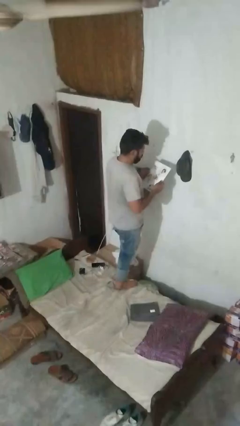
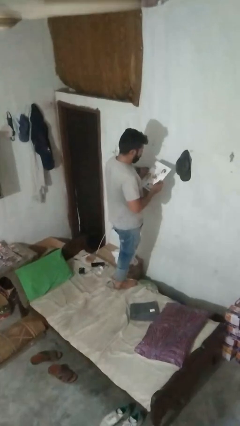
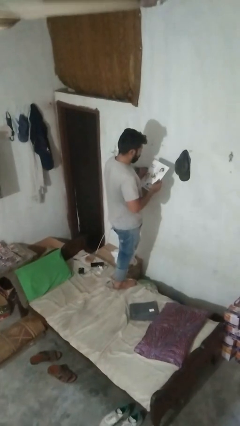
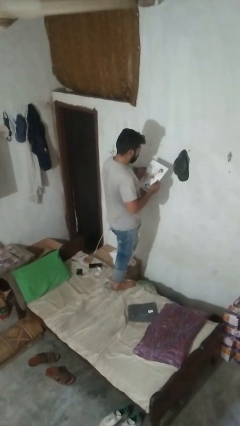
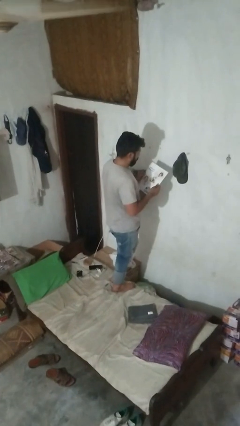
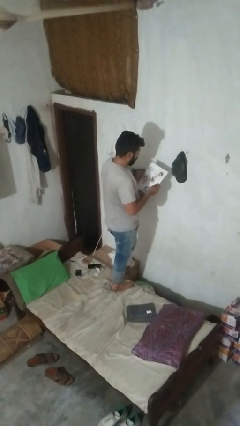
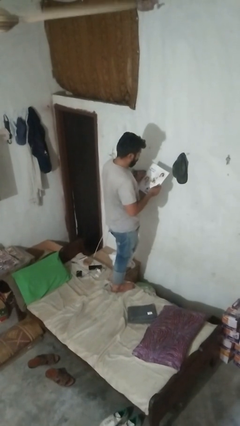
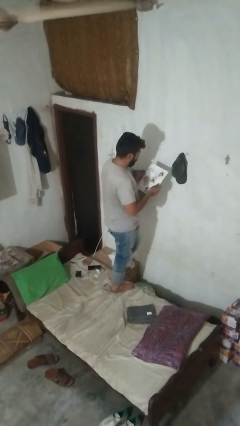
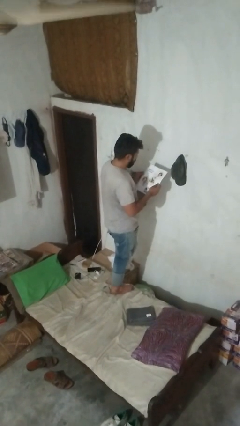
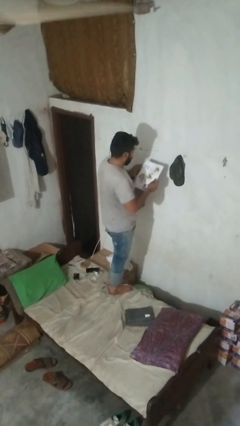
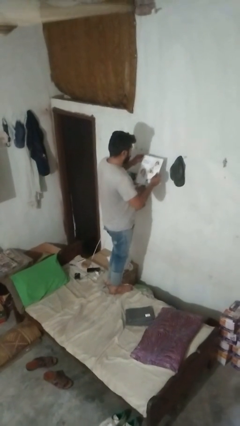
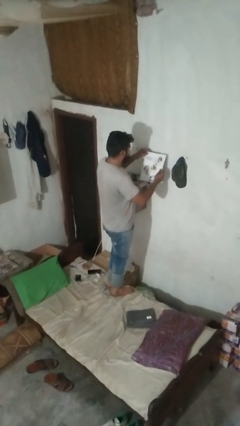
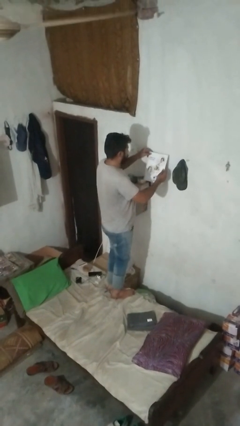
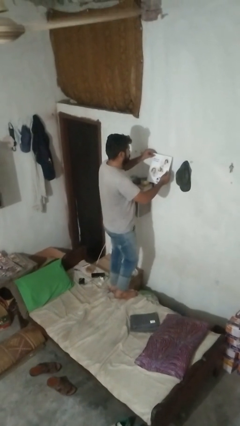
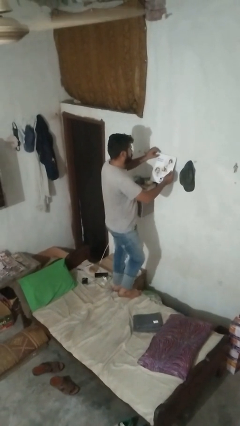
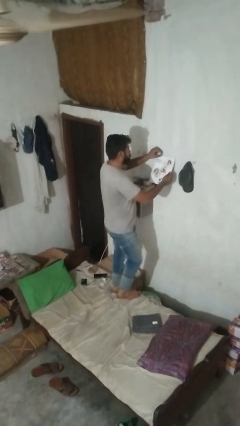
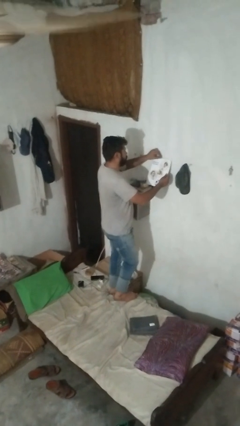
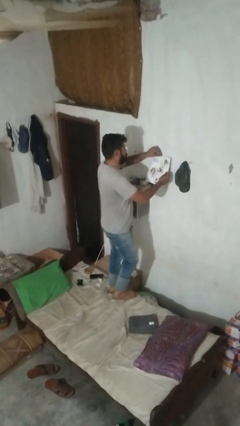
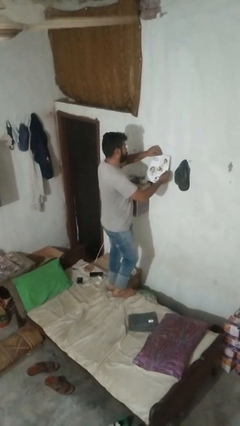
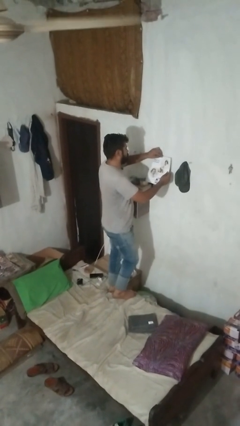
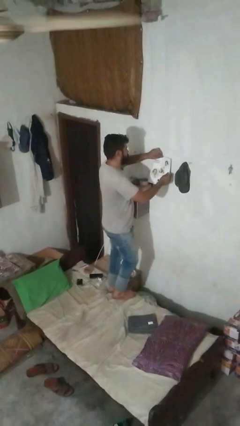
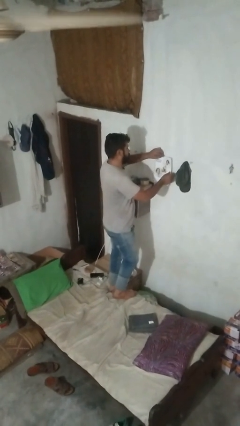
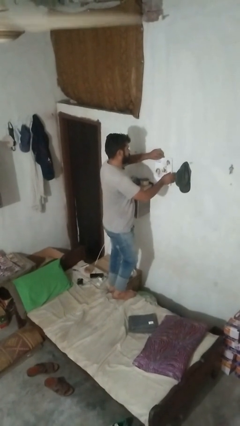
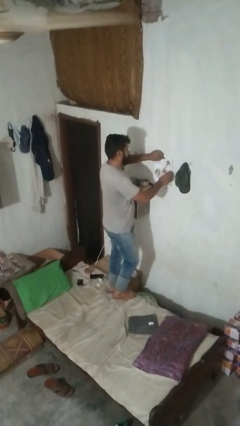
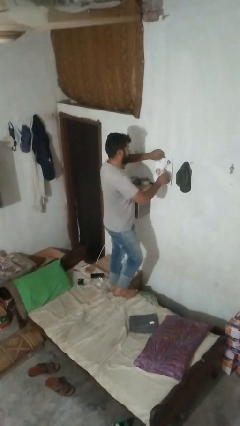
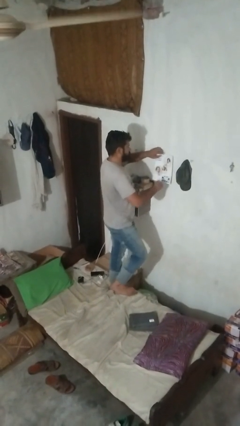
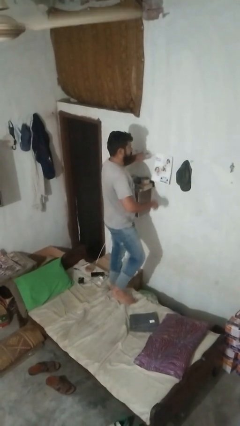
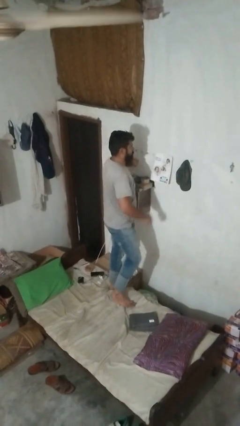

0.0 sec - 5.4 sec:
person puts up picture frame

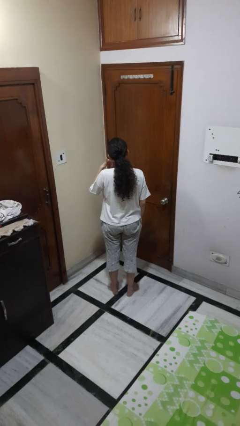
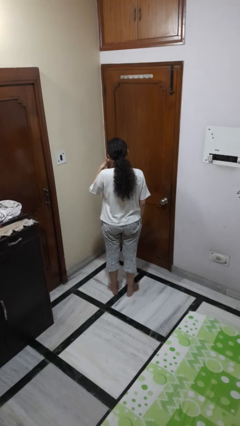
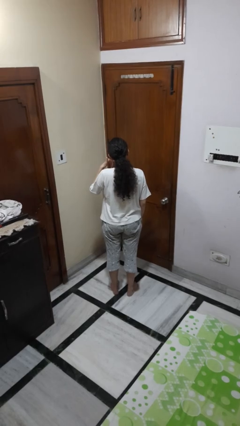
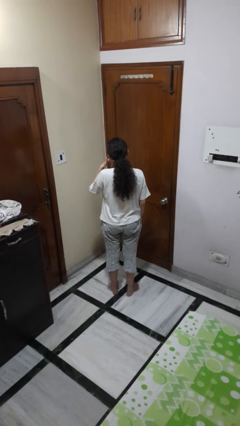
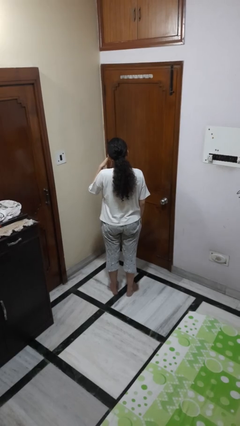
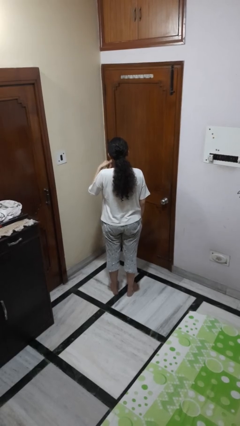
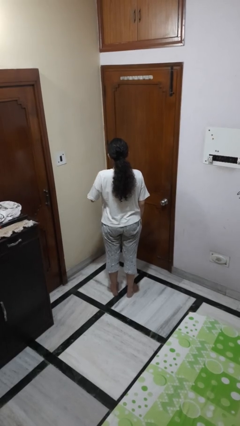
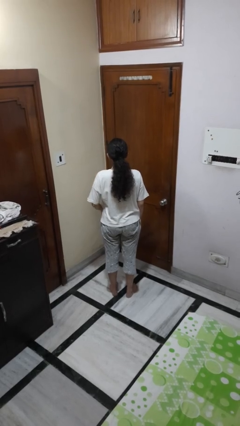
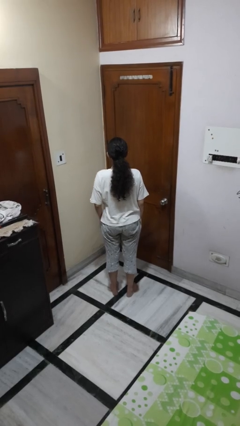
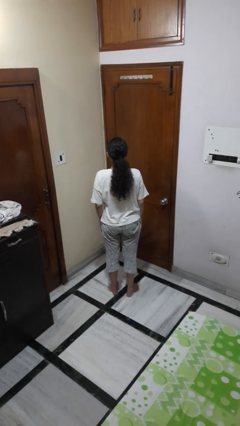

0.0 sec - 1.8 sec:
person gestures call me

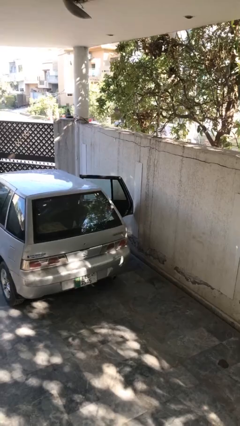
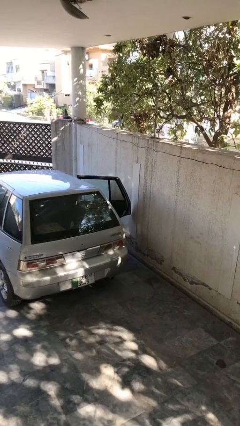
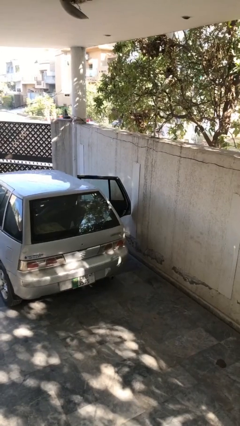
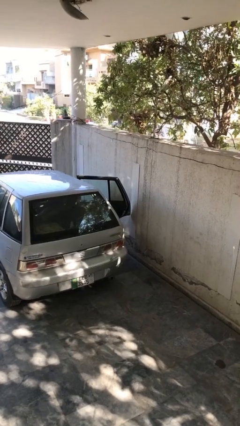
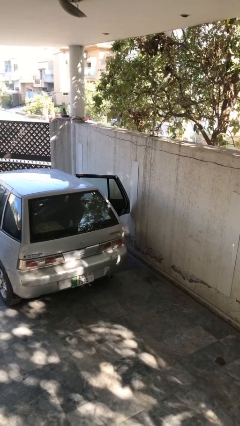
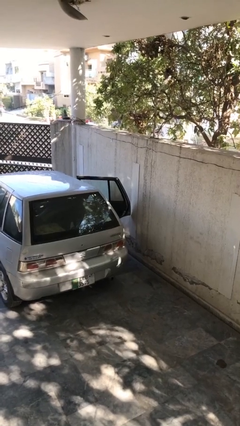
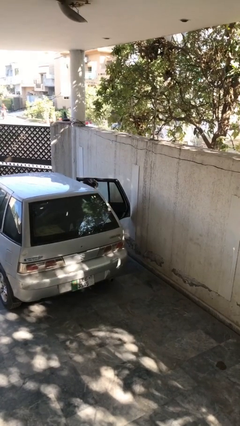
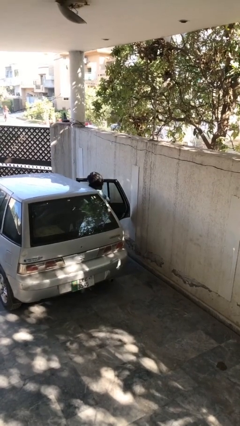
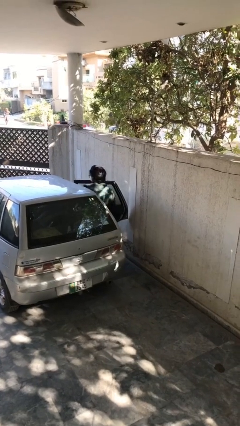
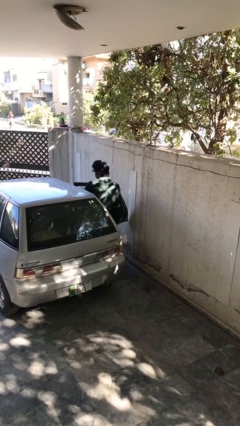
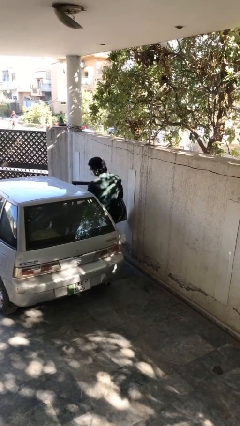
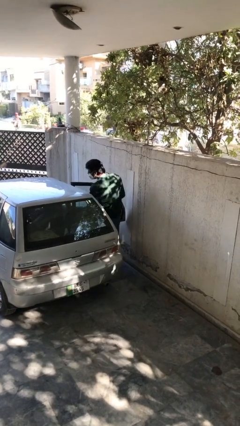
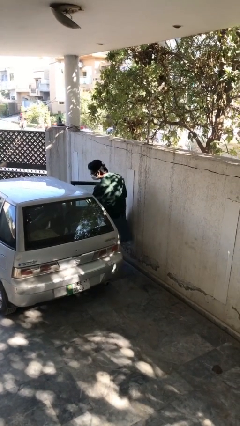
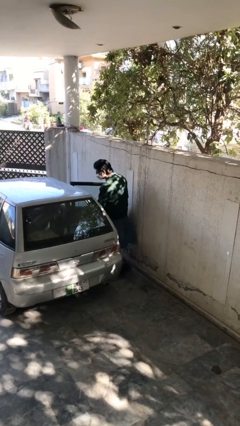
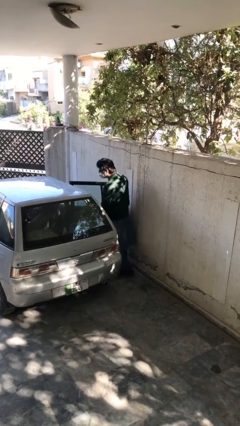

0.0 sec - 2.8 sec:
person exits car

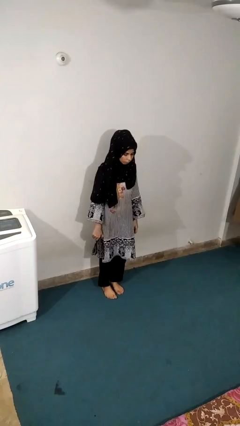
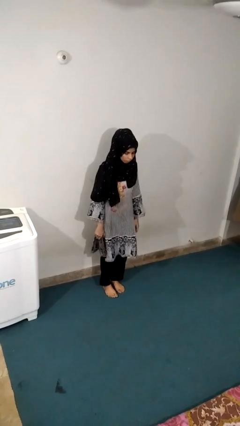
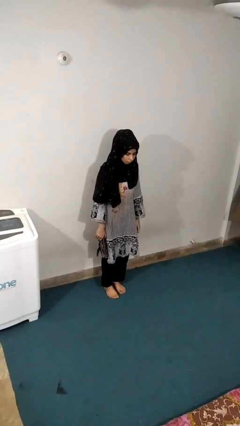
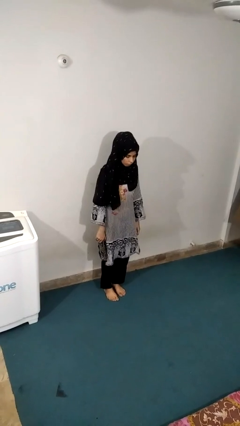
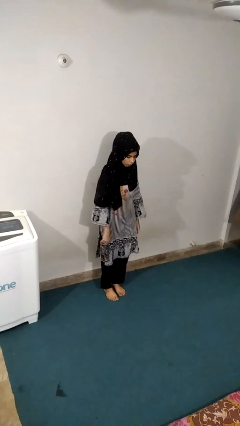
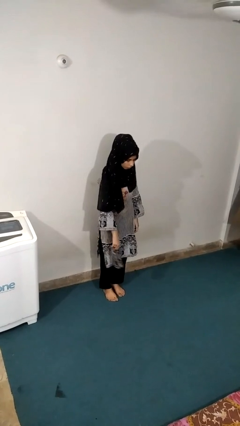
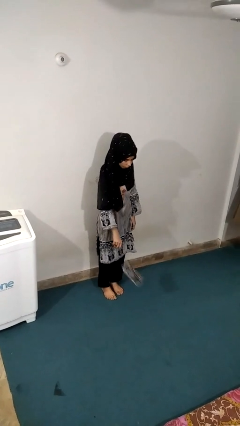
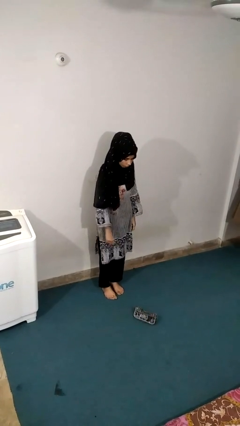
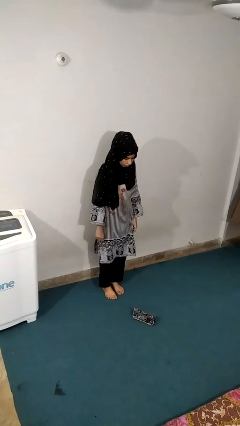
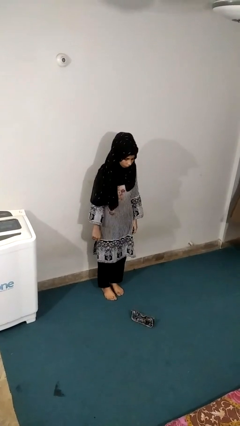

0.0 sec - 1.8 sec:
person throws object to ground

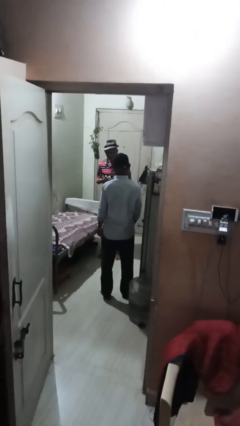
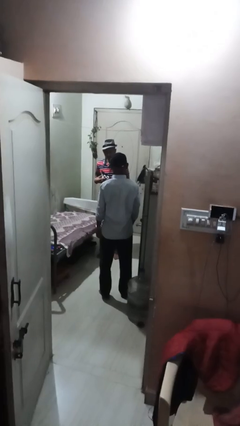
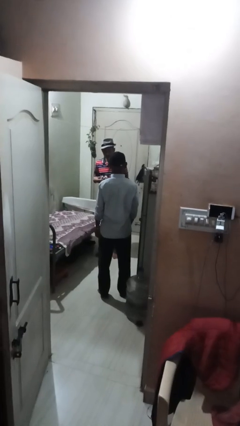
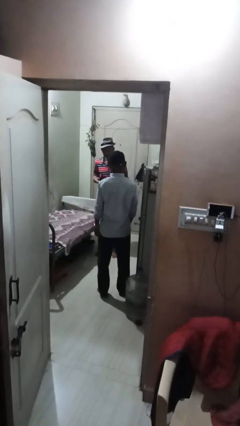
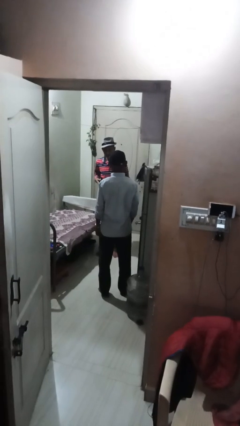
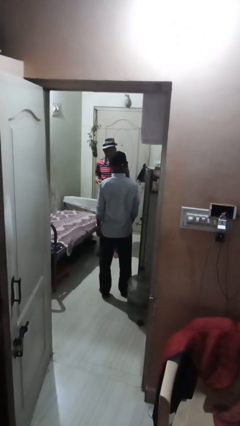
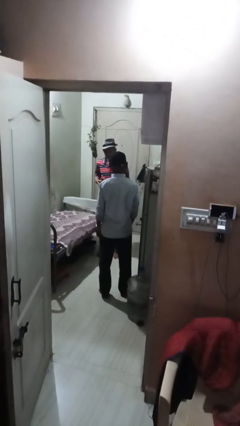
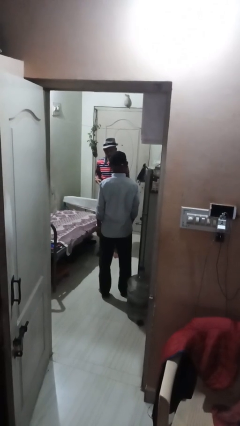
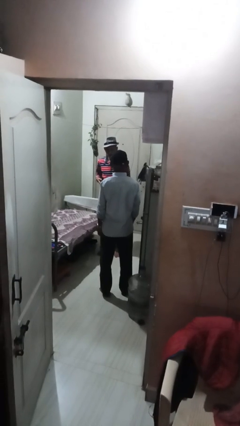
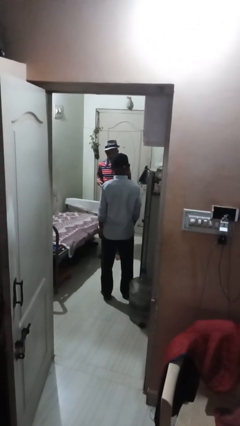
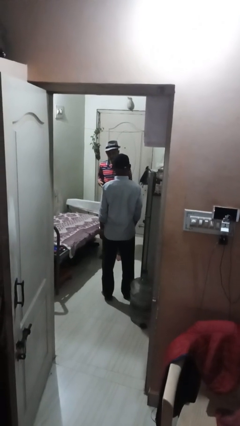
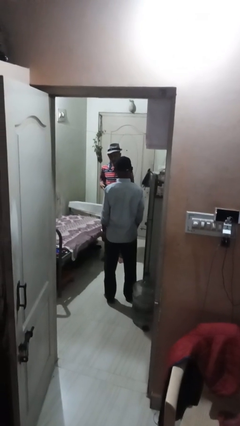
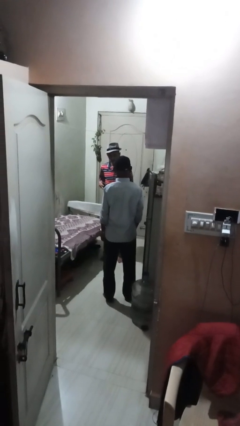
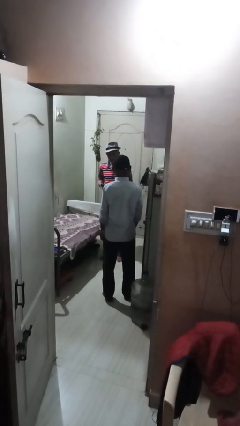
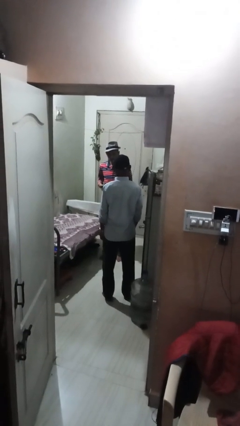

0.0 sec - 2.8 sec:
person throws object to person

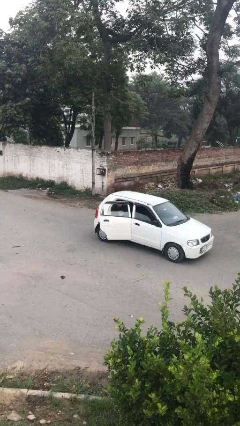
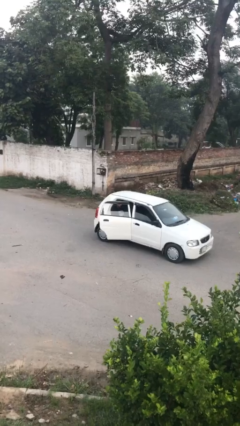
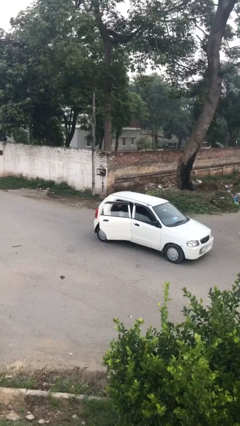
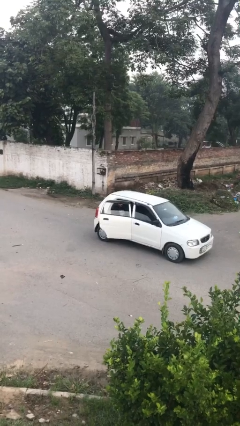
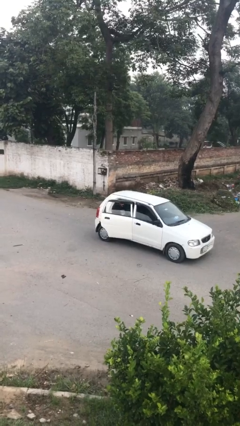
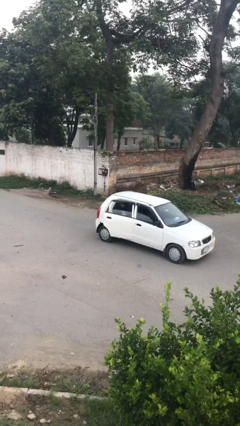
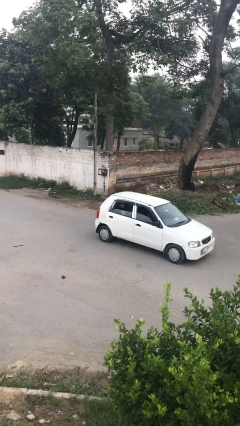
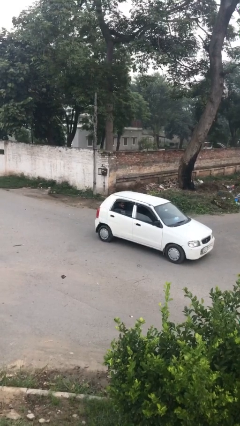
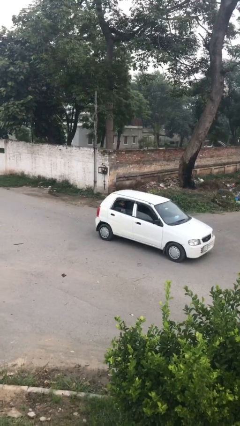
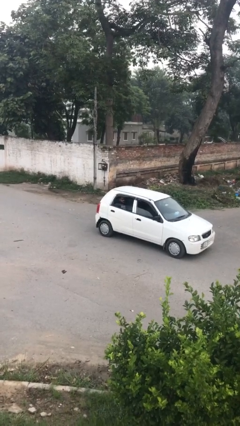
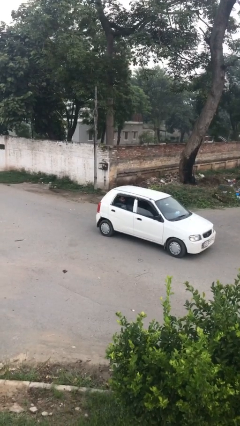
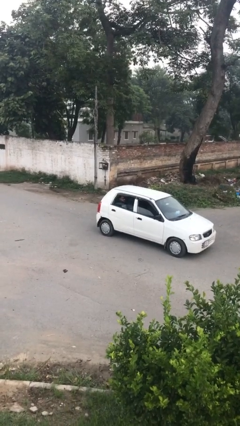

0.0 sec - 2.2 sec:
person closes car door
